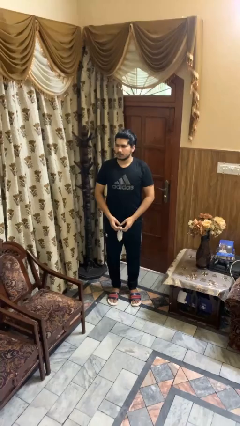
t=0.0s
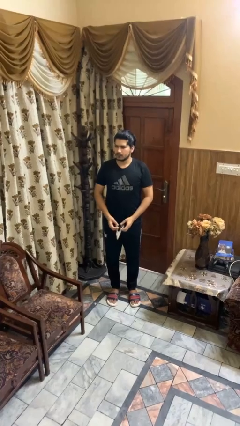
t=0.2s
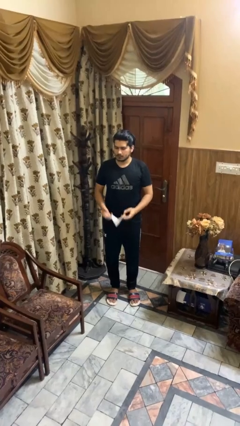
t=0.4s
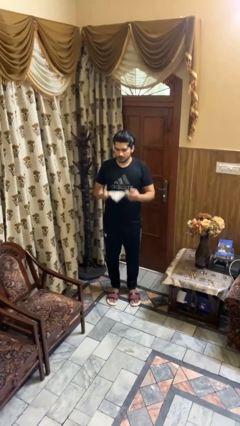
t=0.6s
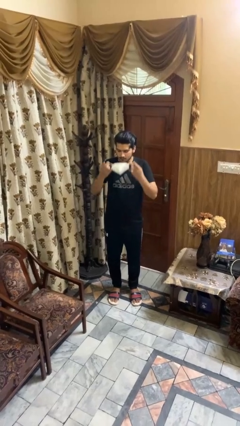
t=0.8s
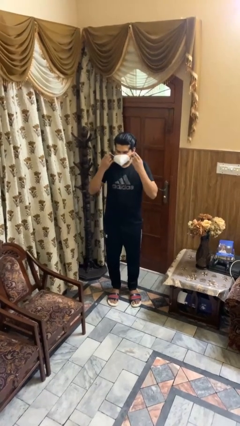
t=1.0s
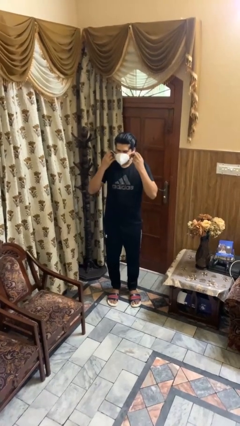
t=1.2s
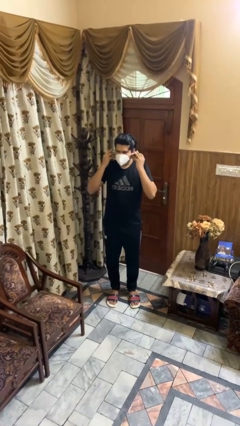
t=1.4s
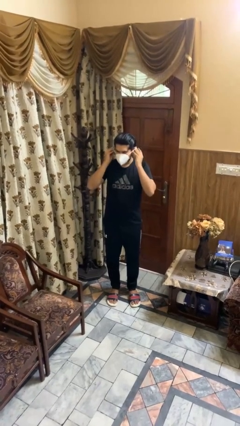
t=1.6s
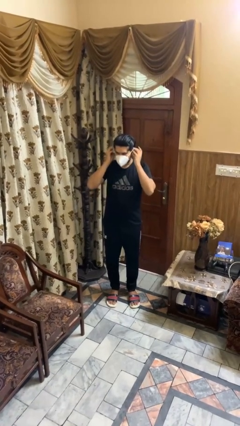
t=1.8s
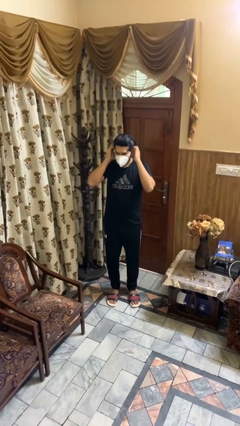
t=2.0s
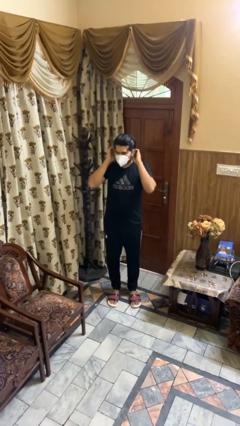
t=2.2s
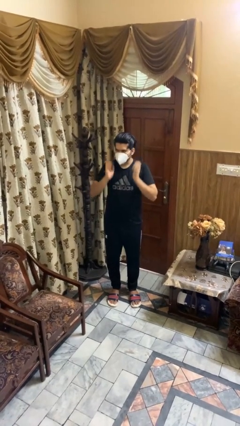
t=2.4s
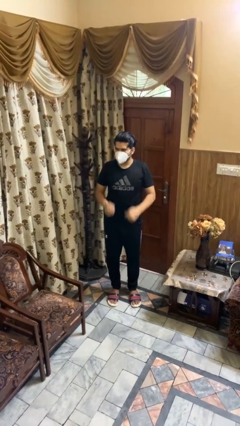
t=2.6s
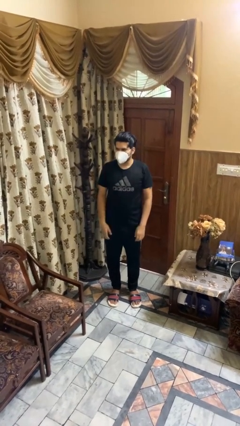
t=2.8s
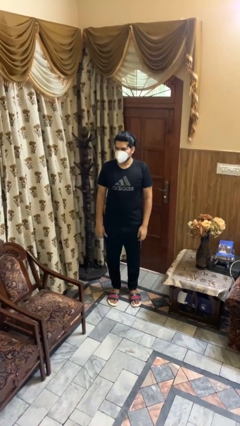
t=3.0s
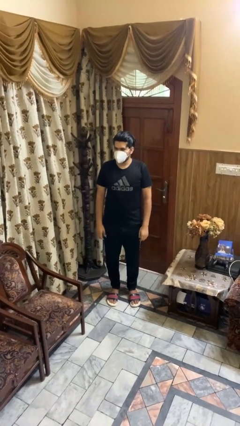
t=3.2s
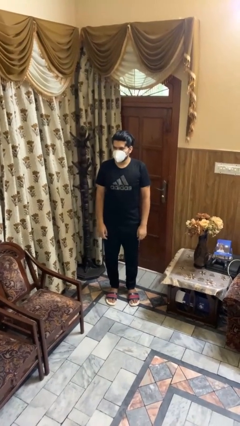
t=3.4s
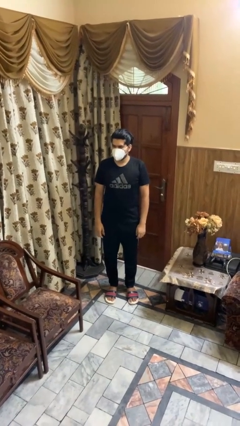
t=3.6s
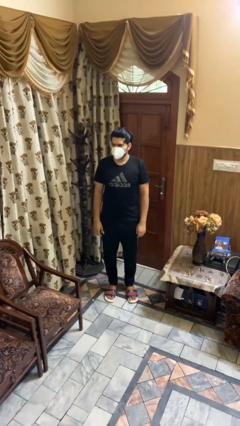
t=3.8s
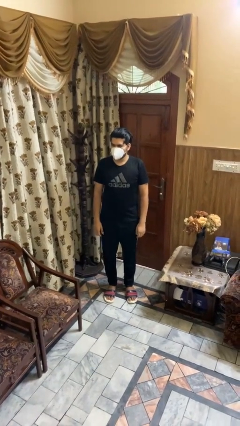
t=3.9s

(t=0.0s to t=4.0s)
person puts on facemask

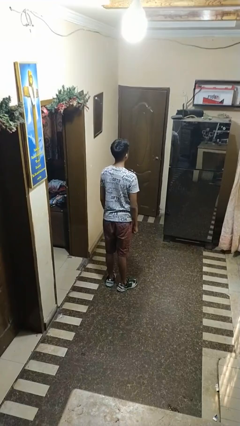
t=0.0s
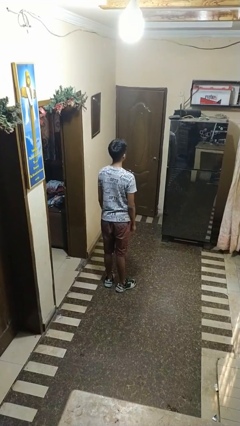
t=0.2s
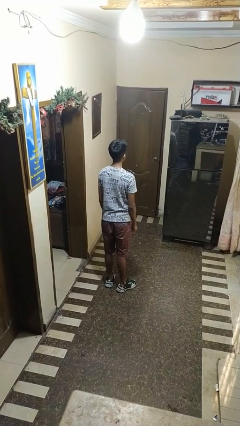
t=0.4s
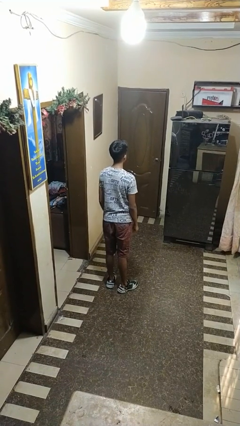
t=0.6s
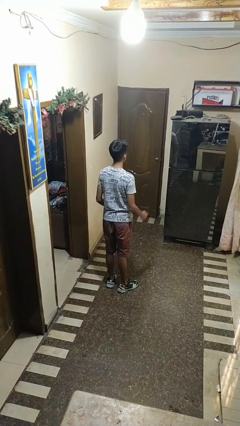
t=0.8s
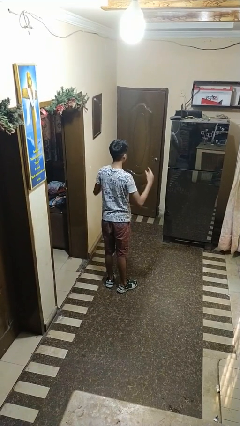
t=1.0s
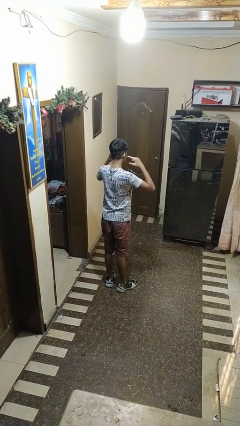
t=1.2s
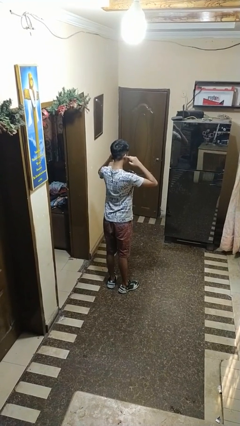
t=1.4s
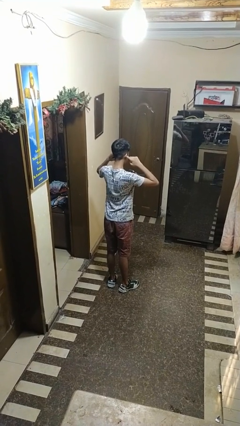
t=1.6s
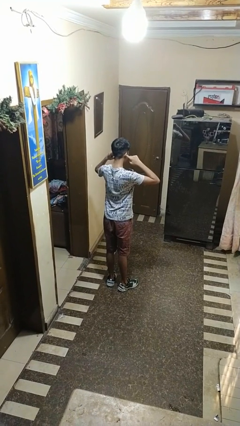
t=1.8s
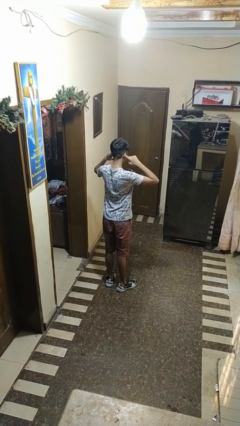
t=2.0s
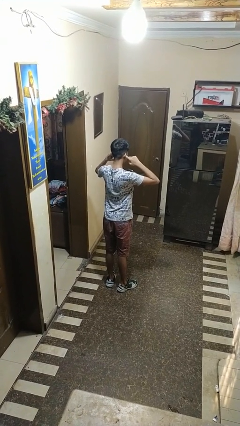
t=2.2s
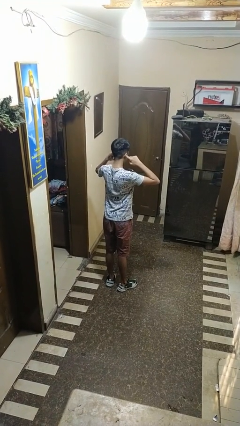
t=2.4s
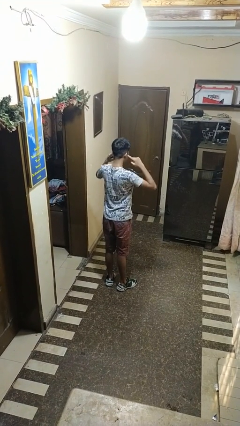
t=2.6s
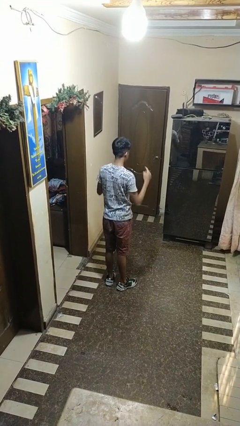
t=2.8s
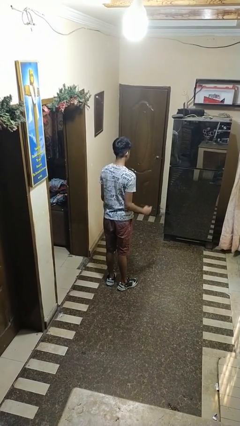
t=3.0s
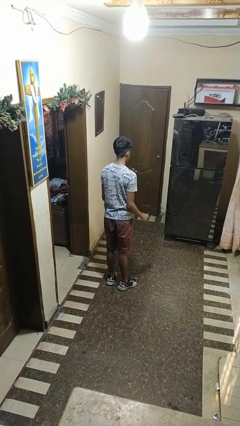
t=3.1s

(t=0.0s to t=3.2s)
person puts fingers in ear

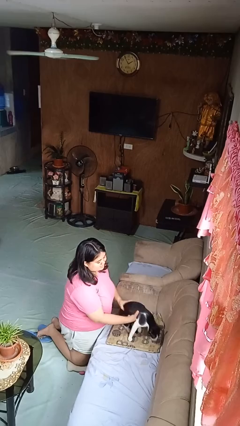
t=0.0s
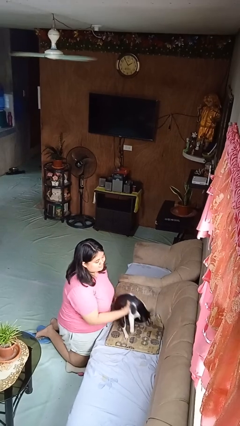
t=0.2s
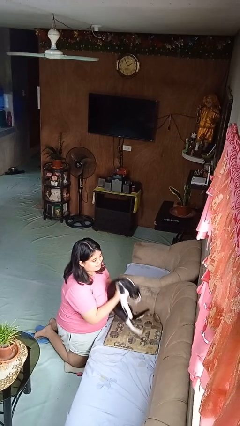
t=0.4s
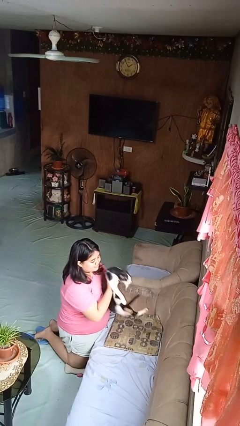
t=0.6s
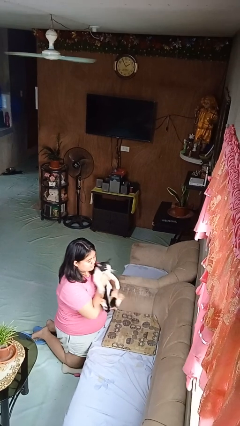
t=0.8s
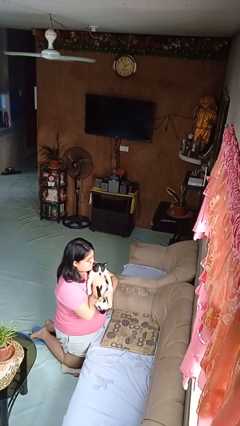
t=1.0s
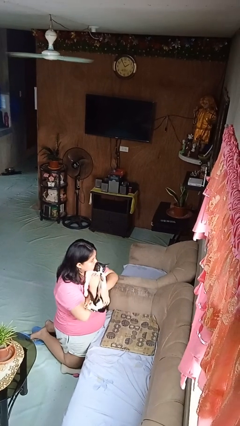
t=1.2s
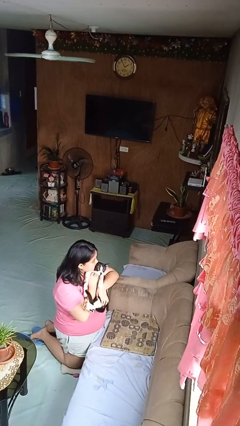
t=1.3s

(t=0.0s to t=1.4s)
person hugs cat

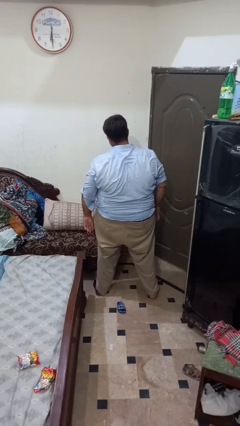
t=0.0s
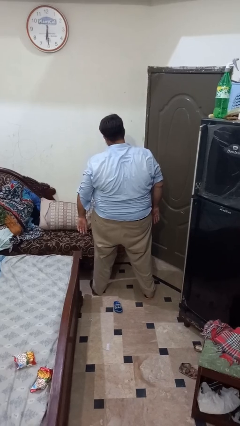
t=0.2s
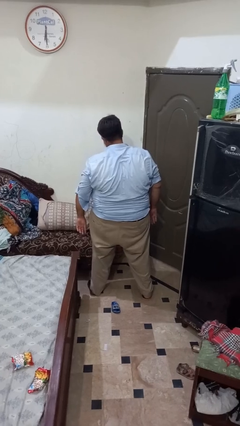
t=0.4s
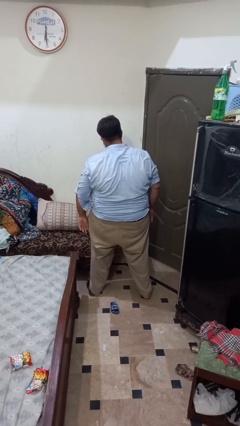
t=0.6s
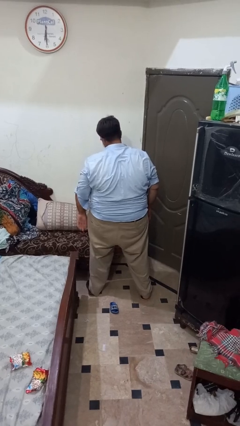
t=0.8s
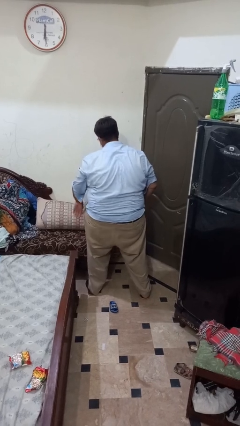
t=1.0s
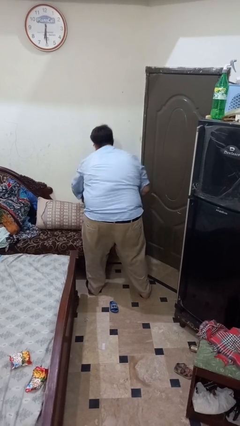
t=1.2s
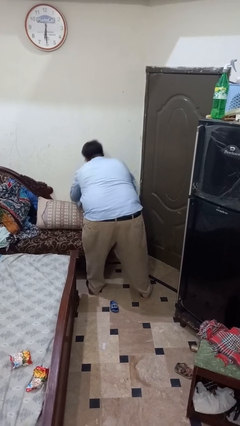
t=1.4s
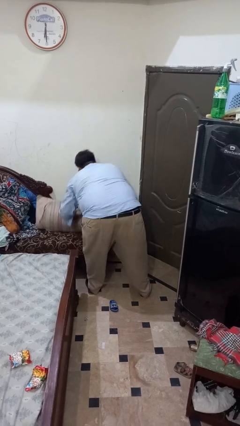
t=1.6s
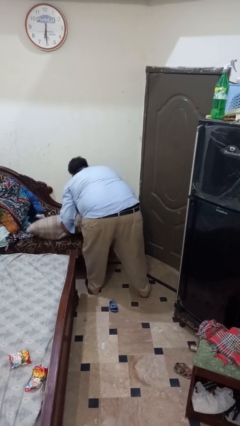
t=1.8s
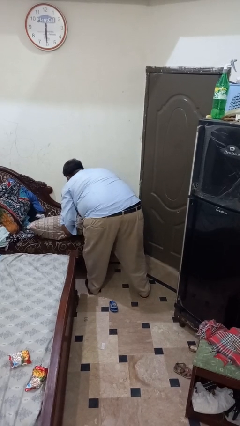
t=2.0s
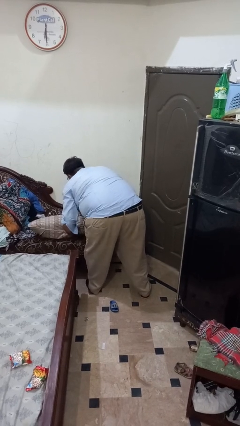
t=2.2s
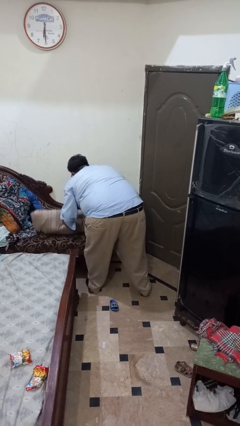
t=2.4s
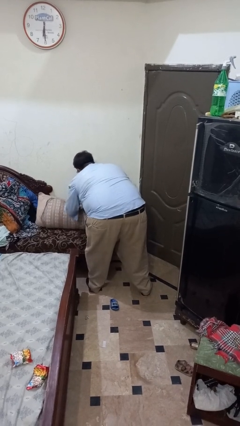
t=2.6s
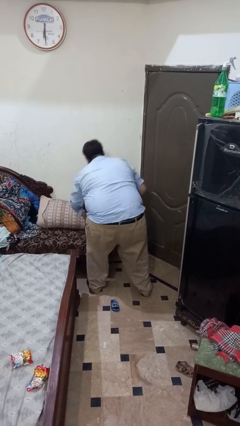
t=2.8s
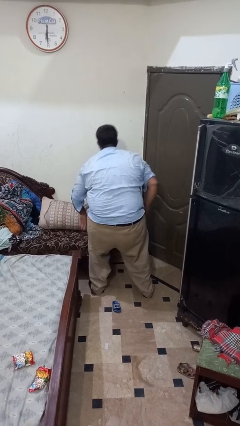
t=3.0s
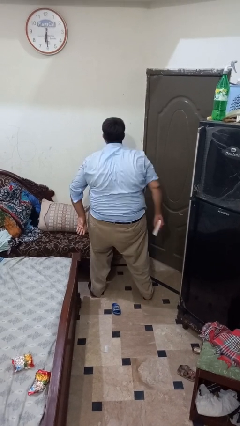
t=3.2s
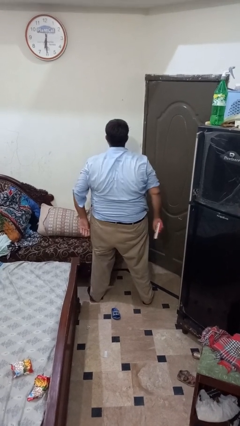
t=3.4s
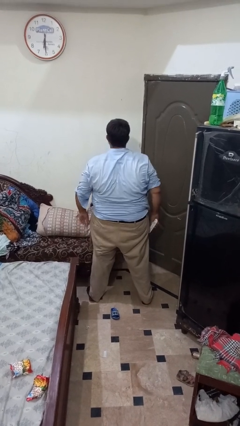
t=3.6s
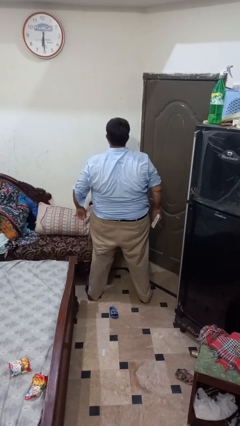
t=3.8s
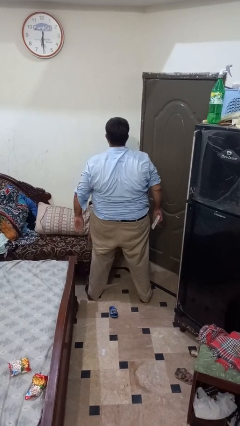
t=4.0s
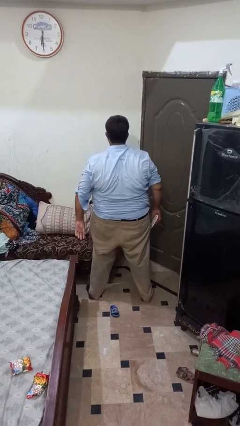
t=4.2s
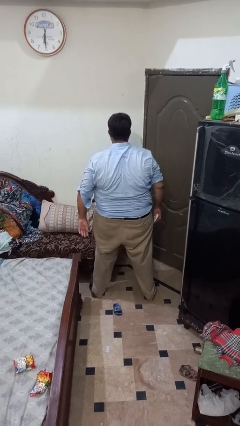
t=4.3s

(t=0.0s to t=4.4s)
person searches in couch

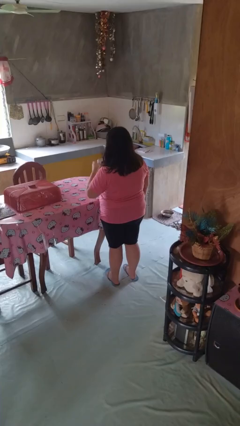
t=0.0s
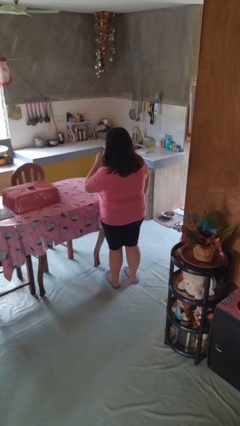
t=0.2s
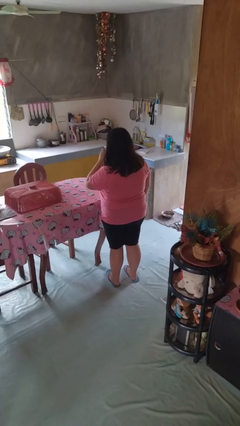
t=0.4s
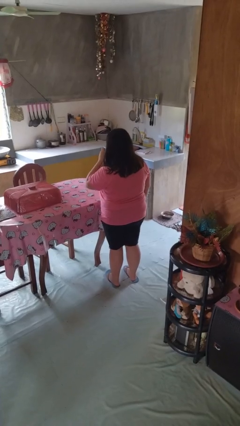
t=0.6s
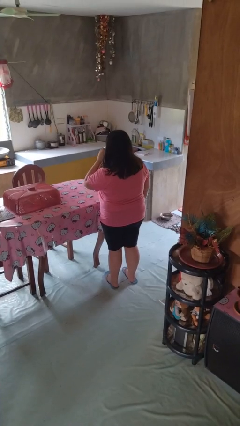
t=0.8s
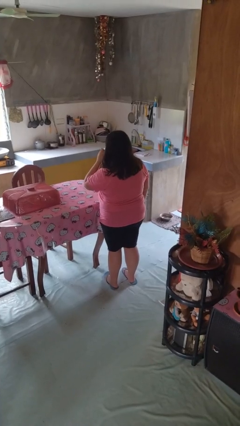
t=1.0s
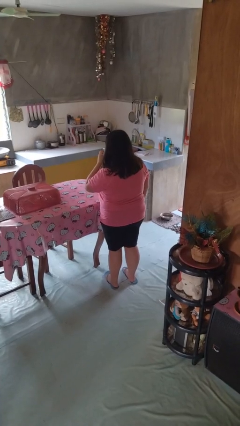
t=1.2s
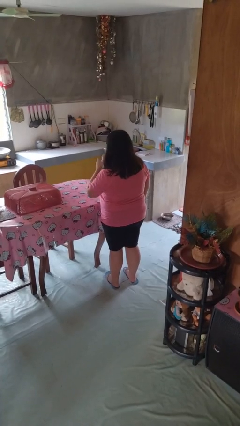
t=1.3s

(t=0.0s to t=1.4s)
person drinks from mug

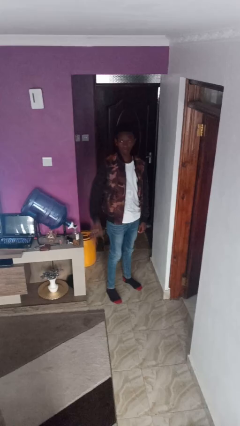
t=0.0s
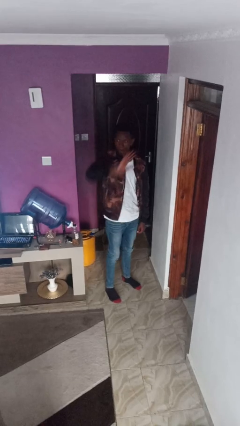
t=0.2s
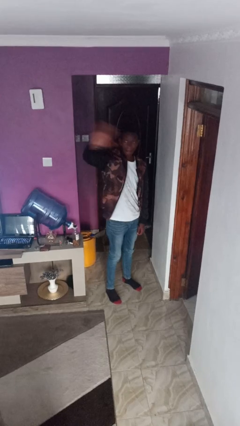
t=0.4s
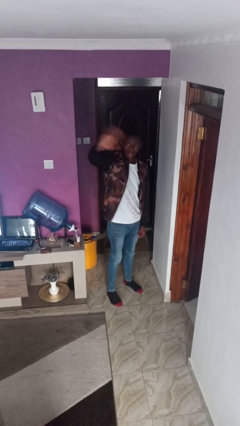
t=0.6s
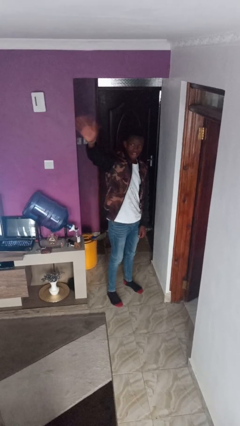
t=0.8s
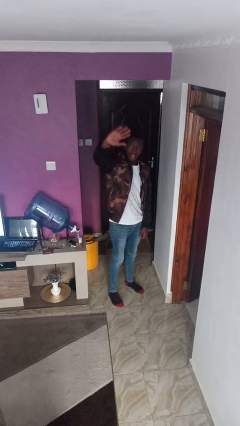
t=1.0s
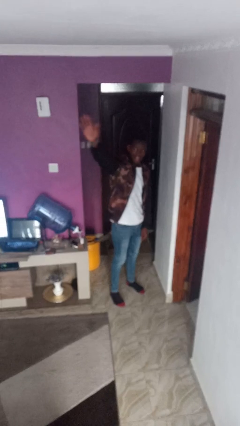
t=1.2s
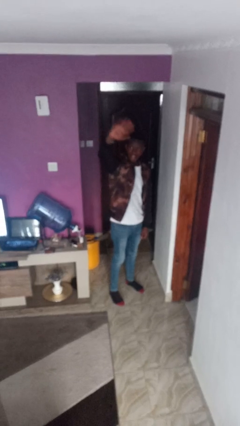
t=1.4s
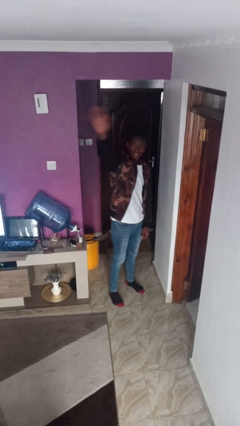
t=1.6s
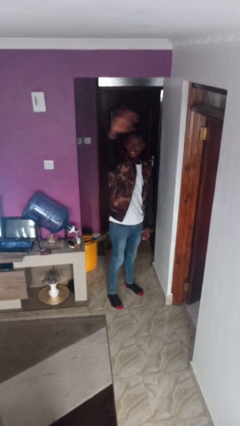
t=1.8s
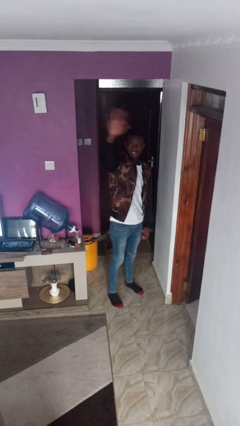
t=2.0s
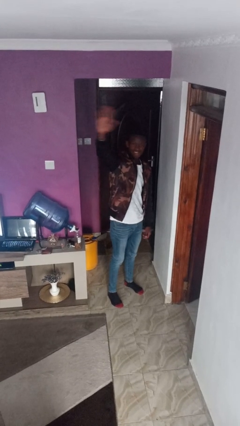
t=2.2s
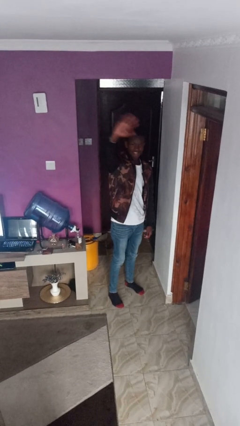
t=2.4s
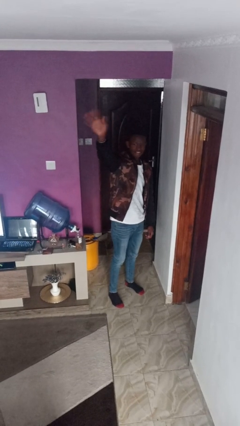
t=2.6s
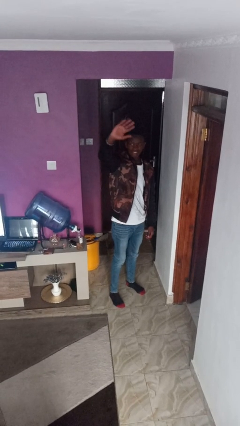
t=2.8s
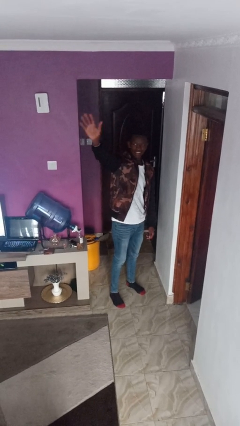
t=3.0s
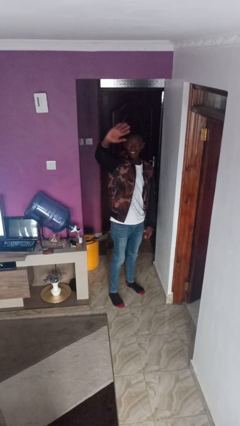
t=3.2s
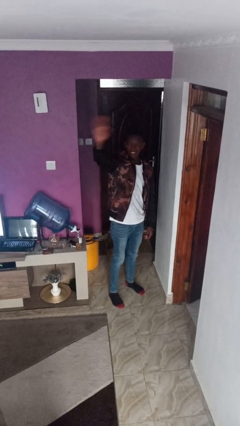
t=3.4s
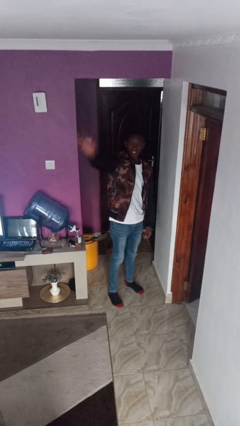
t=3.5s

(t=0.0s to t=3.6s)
person waves at person
